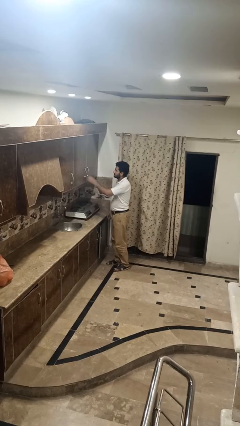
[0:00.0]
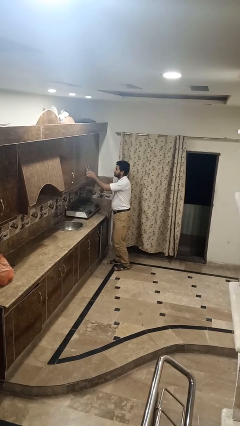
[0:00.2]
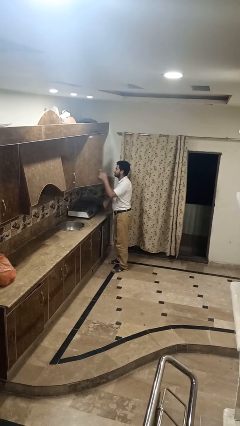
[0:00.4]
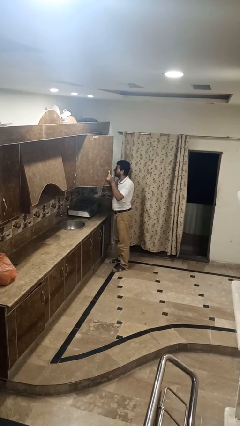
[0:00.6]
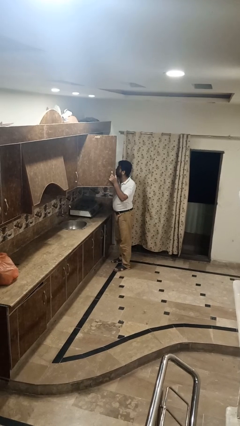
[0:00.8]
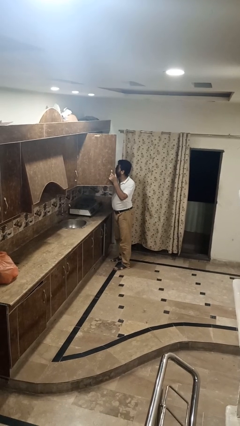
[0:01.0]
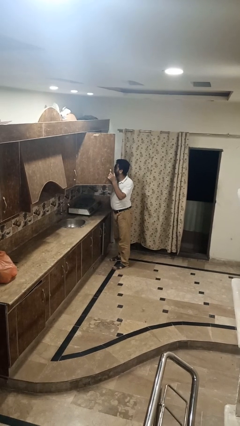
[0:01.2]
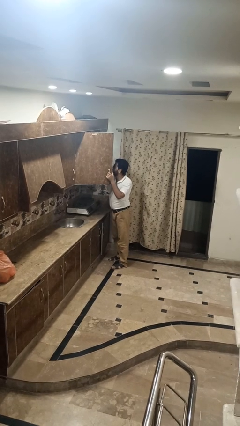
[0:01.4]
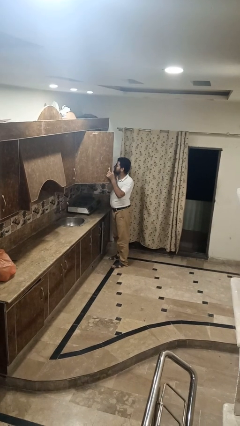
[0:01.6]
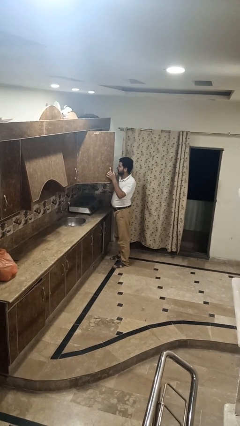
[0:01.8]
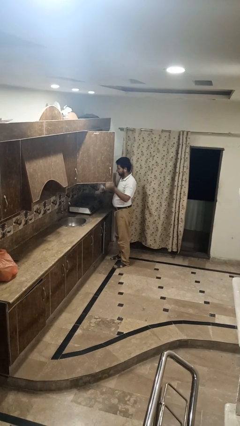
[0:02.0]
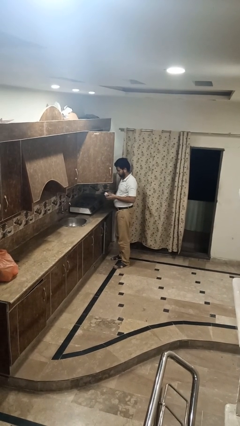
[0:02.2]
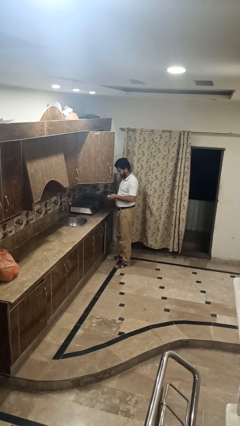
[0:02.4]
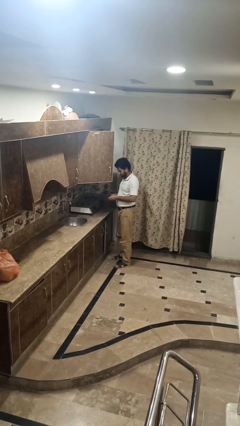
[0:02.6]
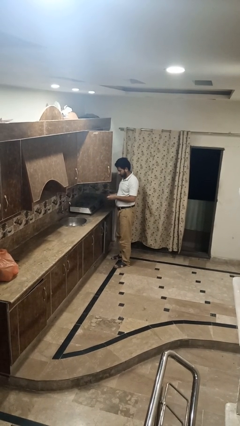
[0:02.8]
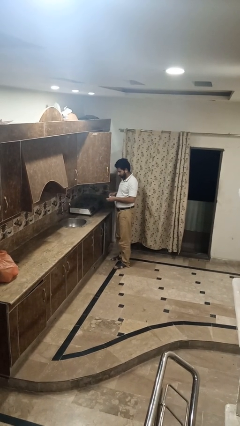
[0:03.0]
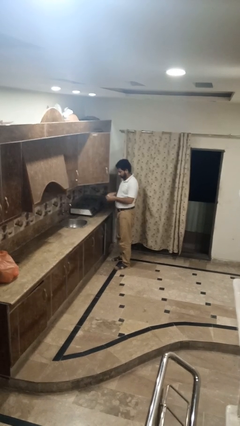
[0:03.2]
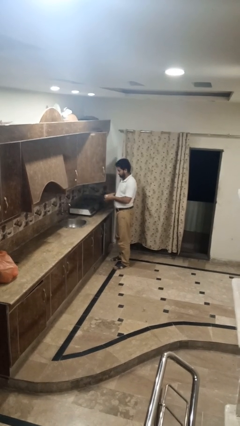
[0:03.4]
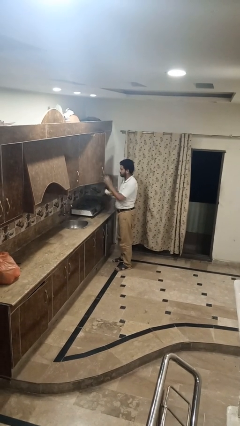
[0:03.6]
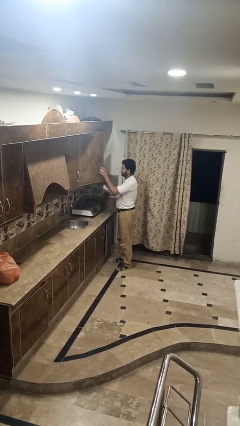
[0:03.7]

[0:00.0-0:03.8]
person takes object from kitchen drawer

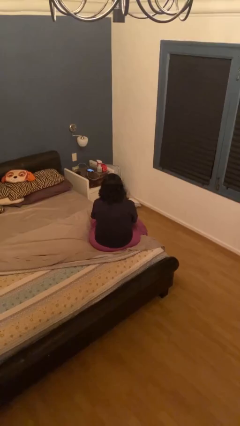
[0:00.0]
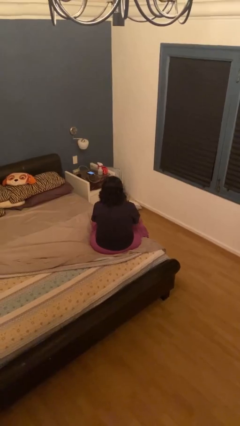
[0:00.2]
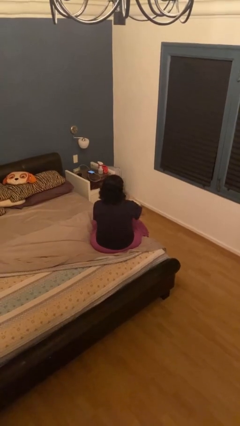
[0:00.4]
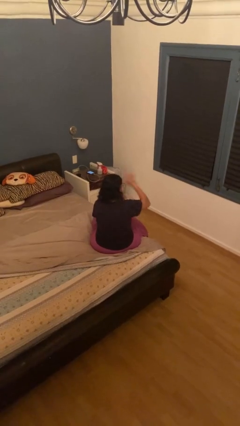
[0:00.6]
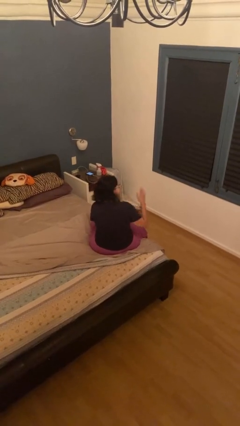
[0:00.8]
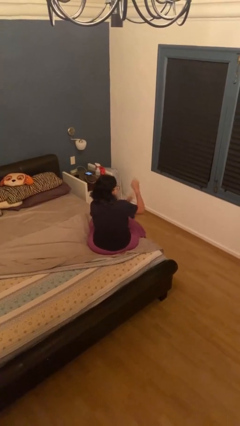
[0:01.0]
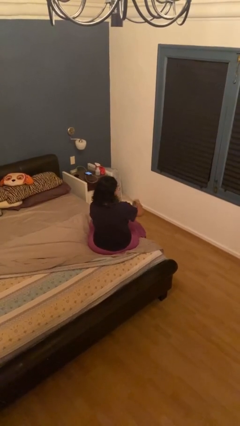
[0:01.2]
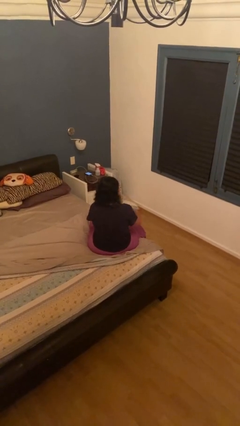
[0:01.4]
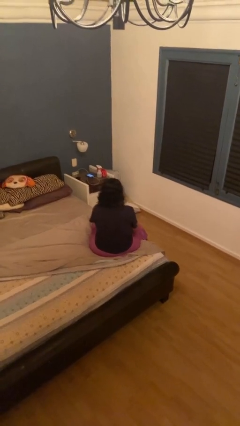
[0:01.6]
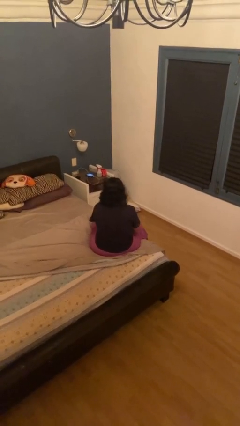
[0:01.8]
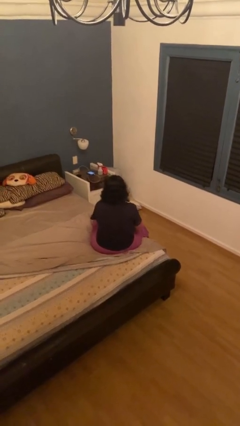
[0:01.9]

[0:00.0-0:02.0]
person swats bug

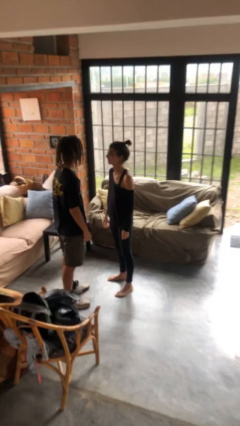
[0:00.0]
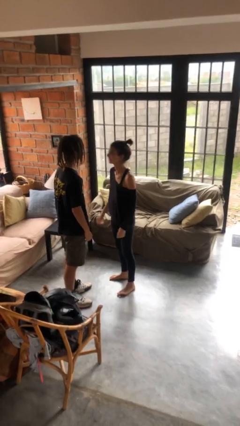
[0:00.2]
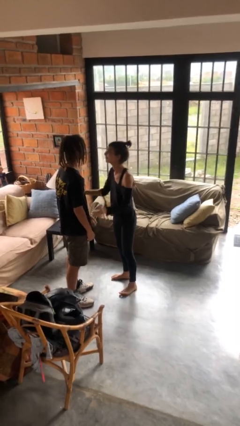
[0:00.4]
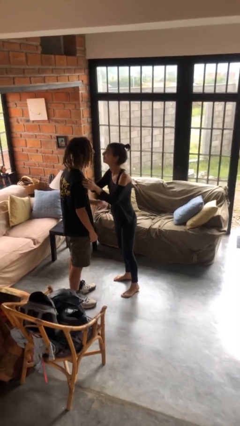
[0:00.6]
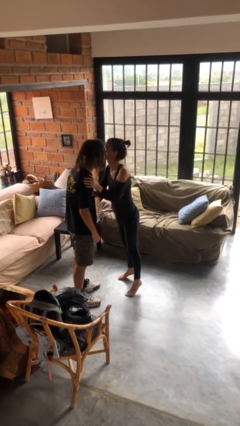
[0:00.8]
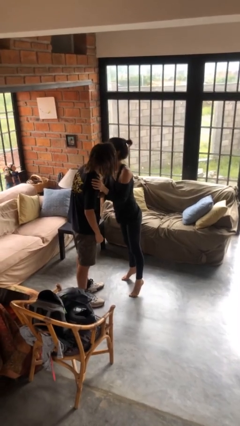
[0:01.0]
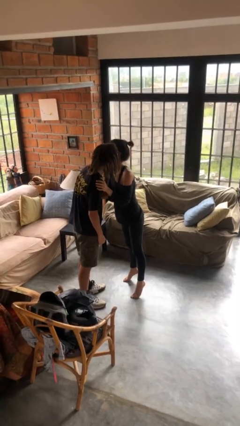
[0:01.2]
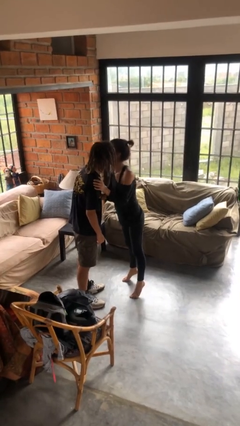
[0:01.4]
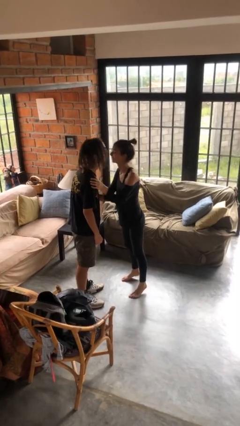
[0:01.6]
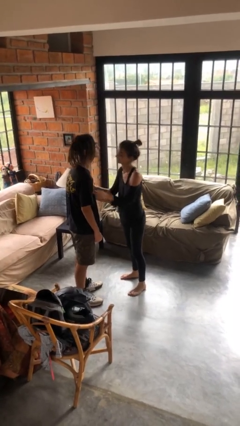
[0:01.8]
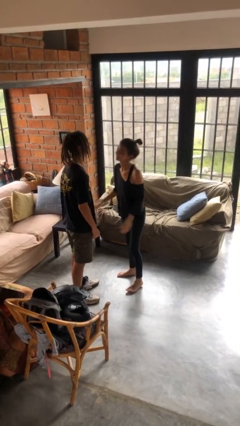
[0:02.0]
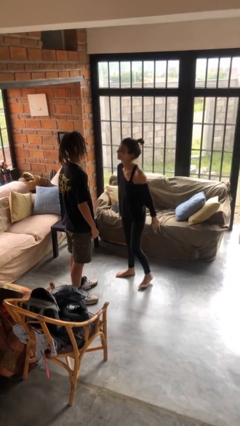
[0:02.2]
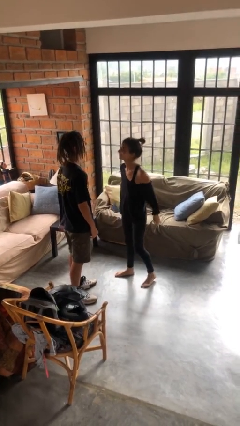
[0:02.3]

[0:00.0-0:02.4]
person kisses cheek of person

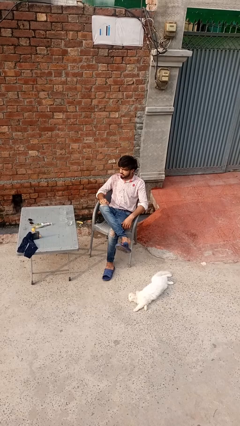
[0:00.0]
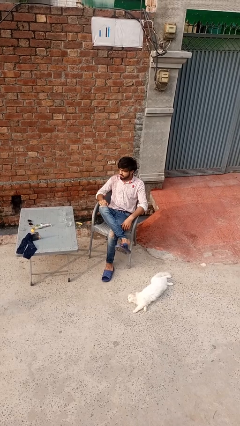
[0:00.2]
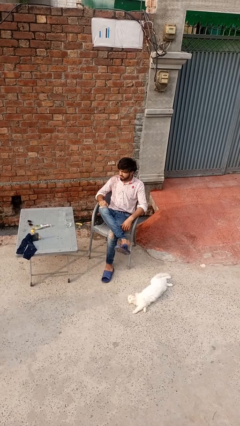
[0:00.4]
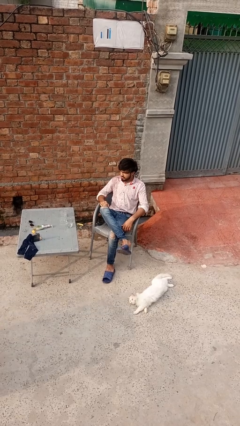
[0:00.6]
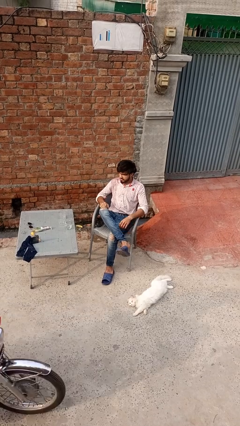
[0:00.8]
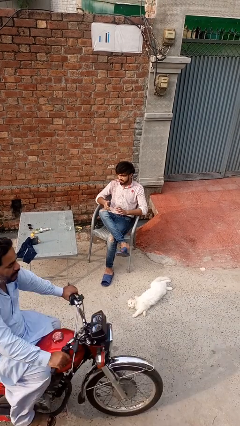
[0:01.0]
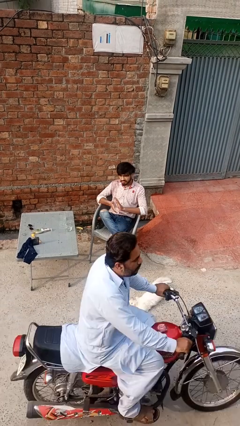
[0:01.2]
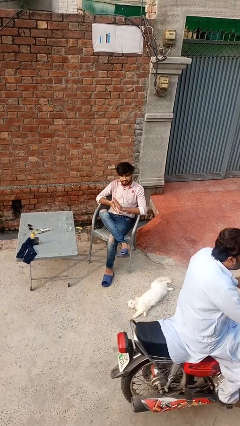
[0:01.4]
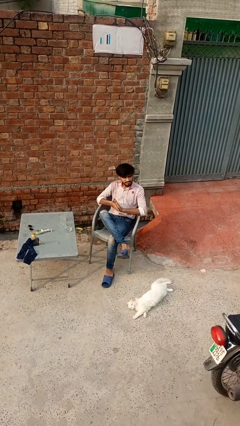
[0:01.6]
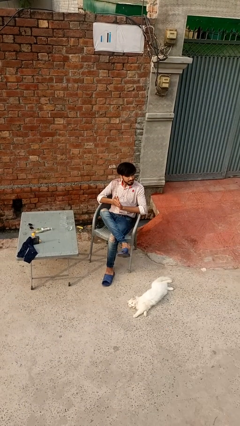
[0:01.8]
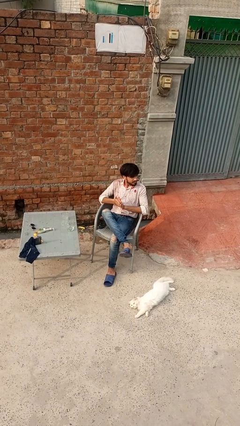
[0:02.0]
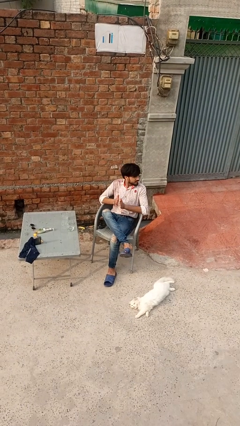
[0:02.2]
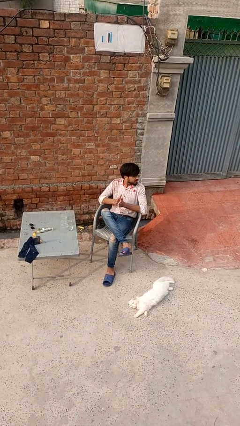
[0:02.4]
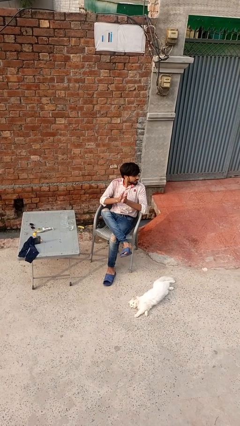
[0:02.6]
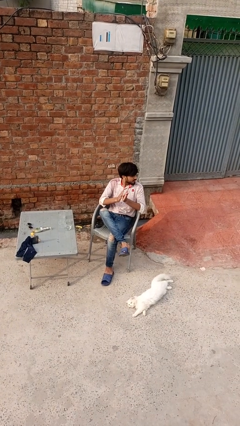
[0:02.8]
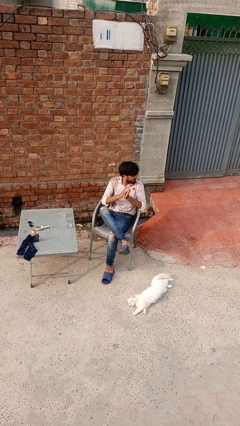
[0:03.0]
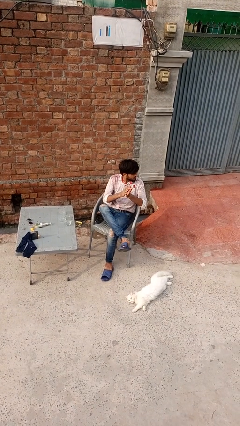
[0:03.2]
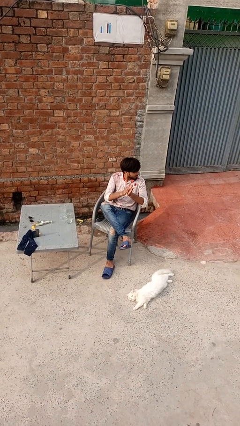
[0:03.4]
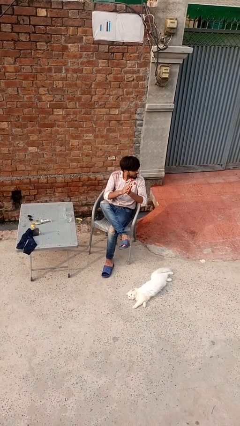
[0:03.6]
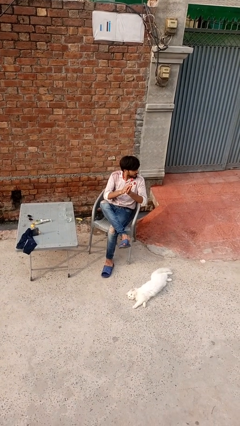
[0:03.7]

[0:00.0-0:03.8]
person claps hands

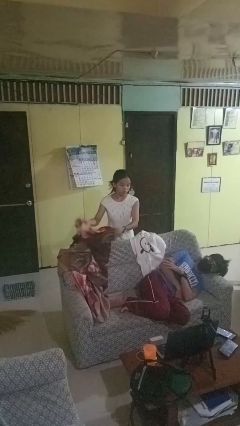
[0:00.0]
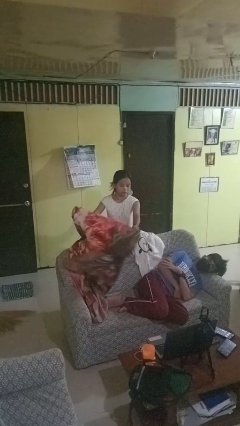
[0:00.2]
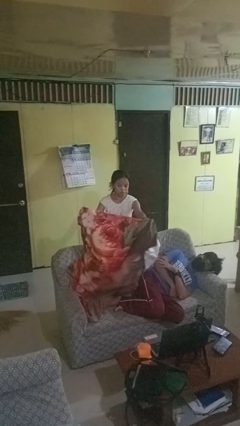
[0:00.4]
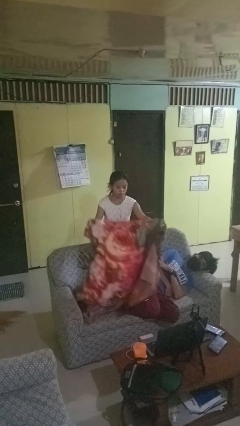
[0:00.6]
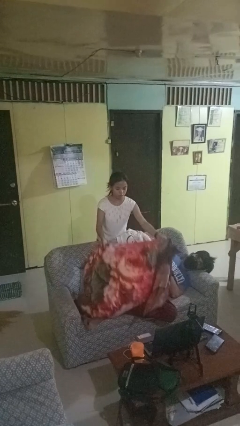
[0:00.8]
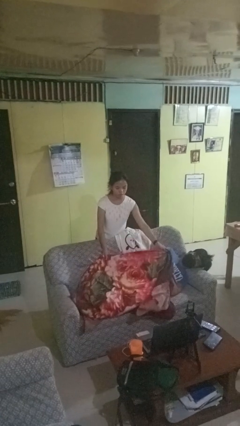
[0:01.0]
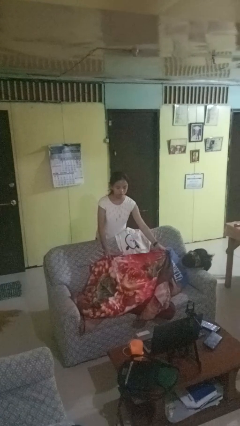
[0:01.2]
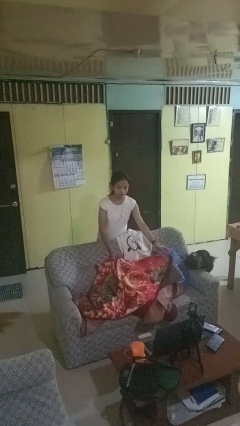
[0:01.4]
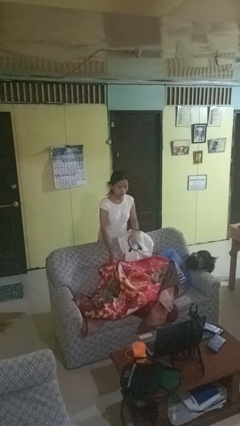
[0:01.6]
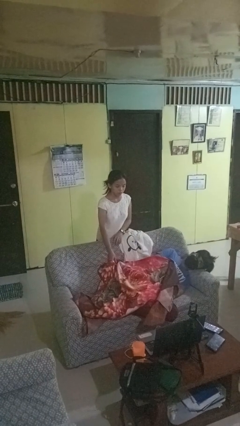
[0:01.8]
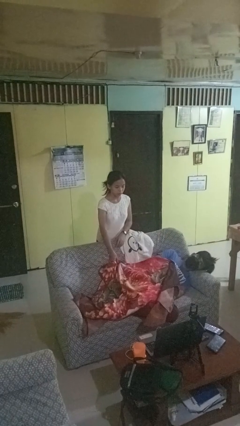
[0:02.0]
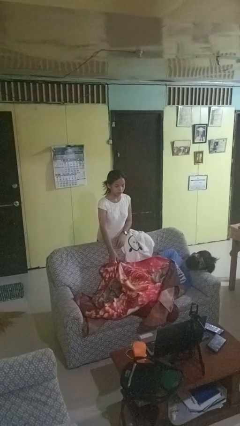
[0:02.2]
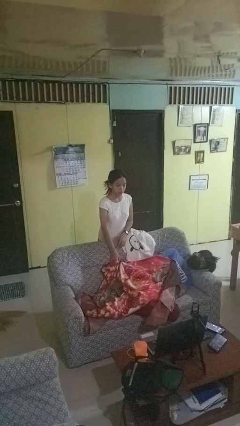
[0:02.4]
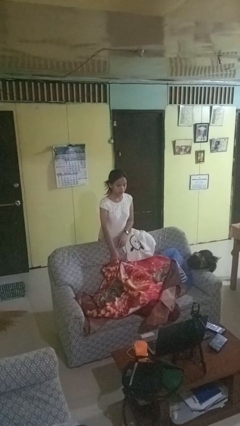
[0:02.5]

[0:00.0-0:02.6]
person covers friend with blanket

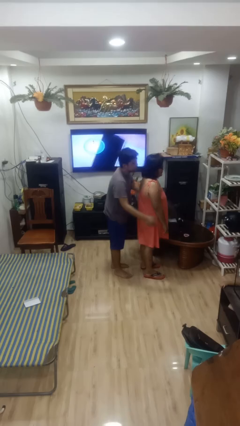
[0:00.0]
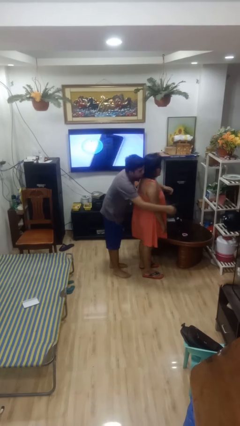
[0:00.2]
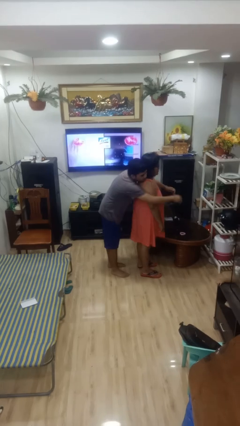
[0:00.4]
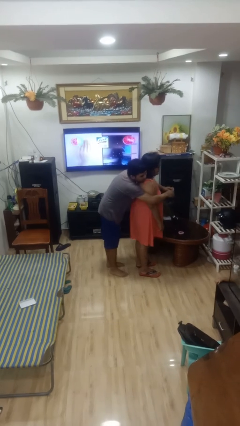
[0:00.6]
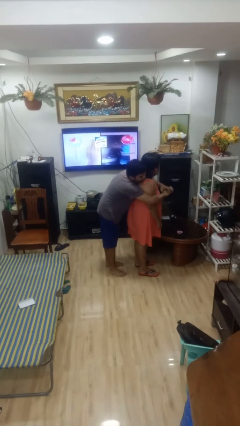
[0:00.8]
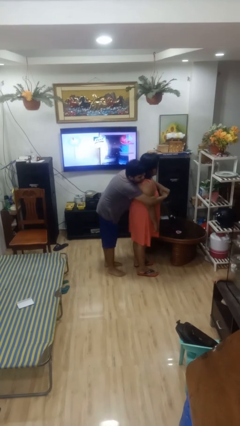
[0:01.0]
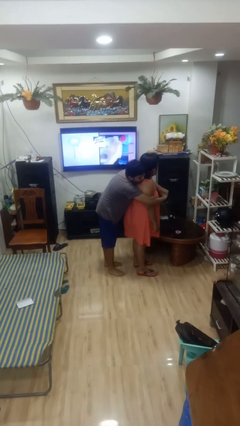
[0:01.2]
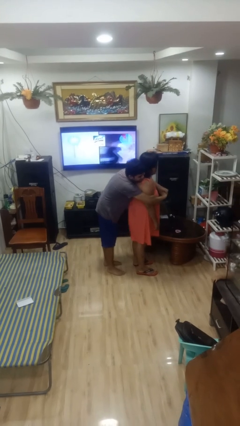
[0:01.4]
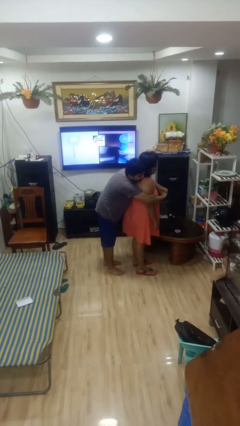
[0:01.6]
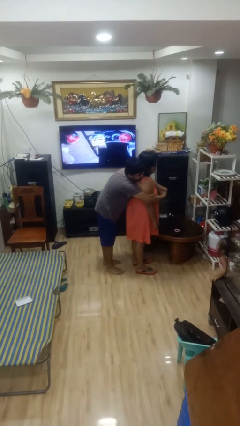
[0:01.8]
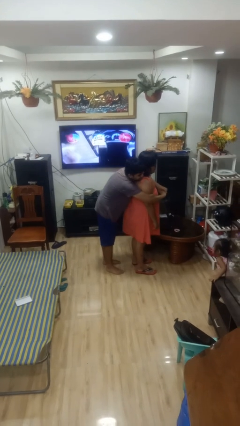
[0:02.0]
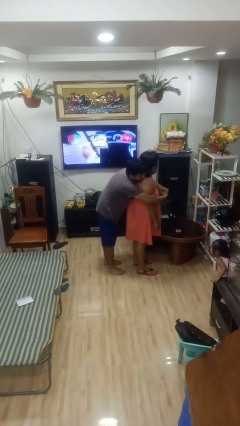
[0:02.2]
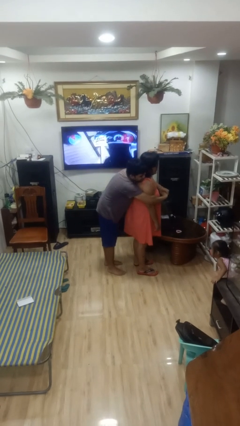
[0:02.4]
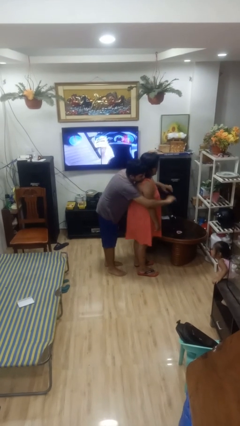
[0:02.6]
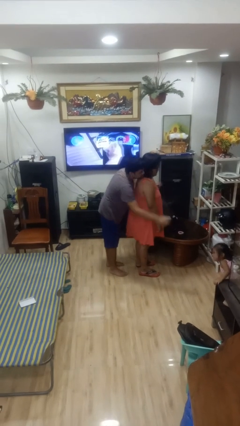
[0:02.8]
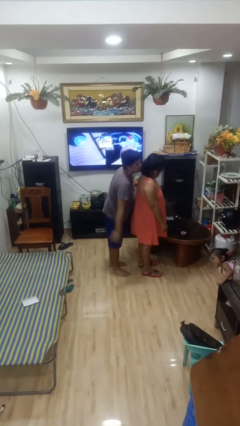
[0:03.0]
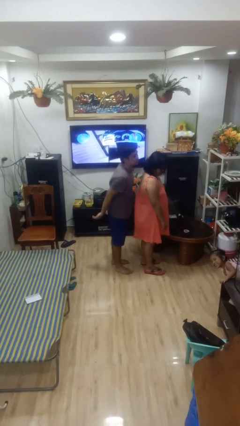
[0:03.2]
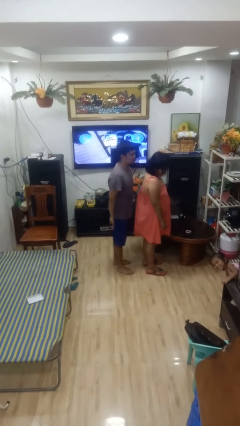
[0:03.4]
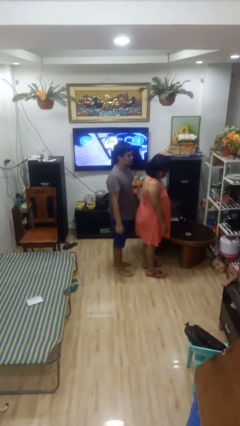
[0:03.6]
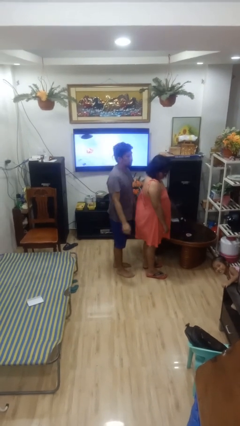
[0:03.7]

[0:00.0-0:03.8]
person hugs person from behind
